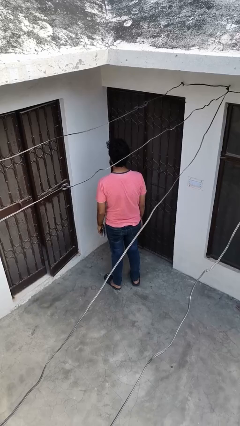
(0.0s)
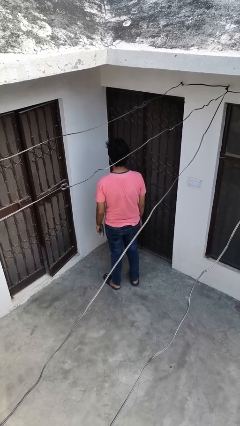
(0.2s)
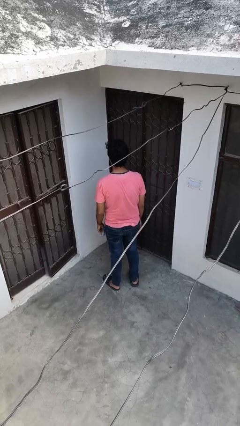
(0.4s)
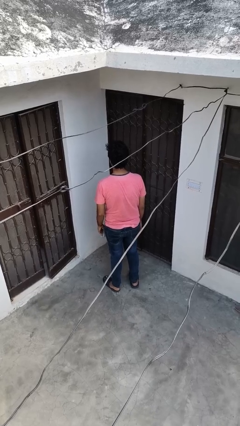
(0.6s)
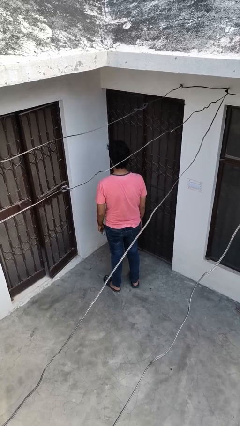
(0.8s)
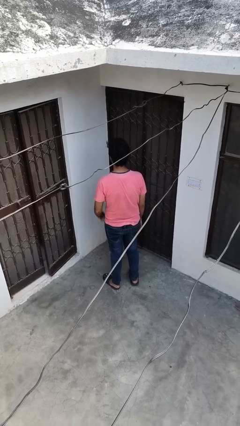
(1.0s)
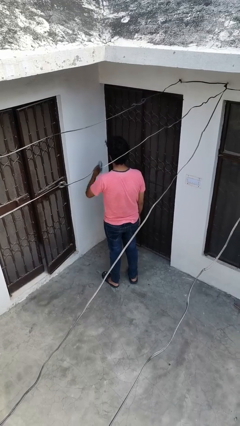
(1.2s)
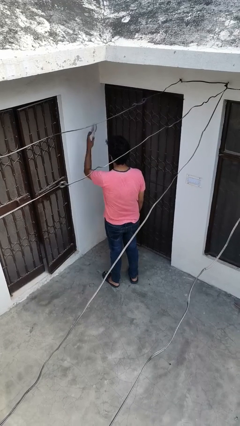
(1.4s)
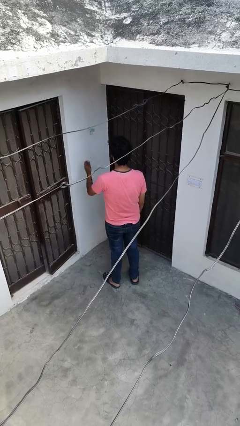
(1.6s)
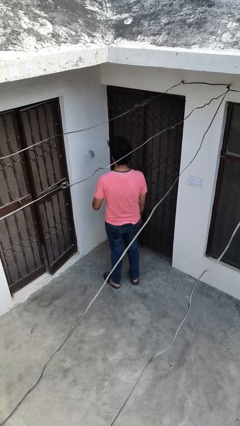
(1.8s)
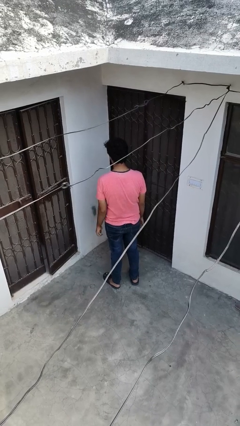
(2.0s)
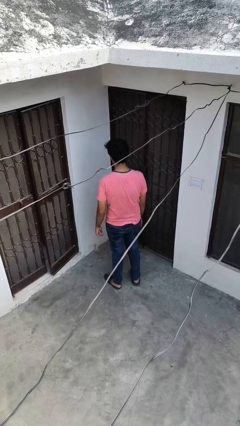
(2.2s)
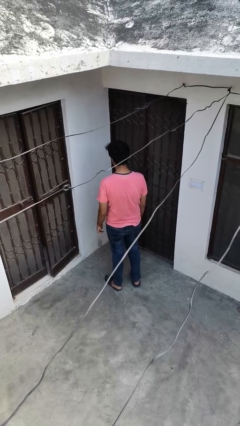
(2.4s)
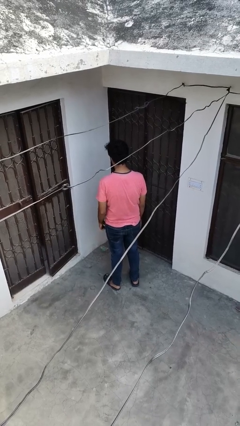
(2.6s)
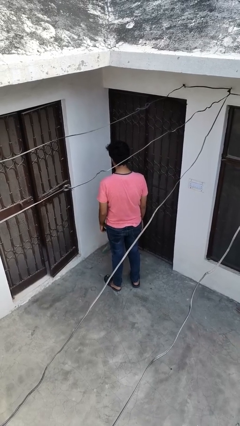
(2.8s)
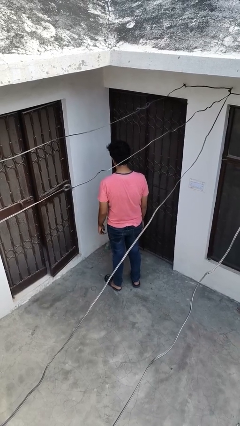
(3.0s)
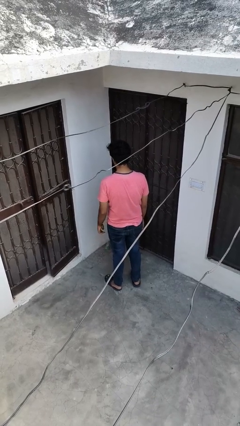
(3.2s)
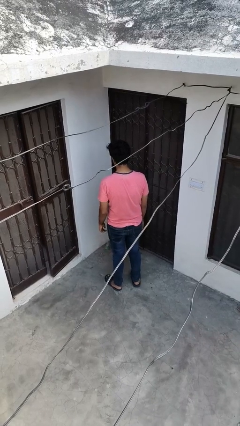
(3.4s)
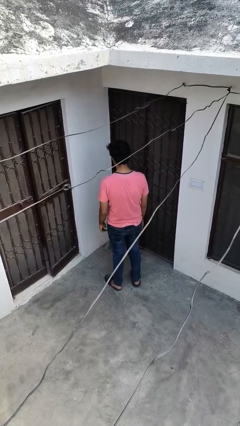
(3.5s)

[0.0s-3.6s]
person throws object into air

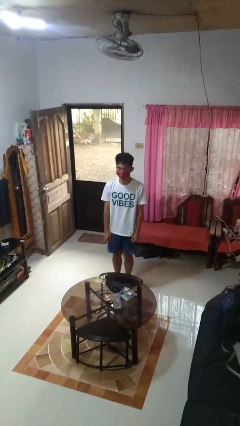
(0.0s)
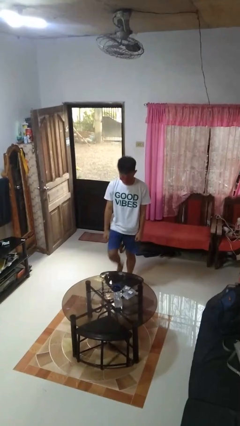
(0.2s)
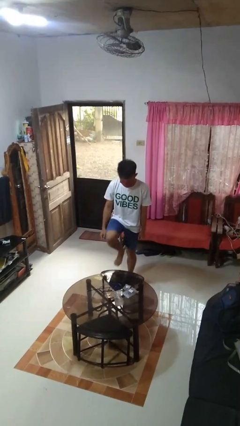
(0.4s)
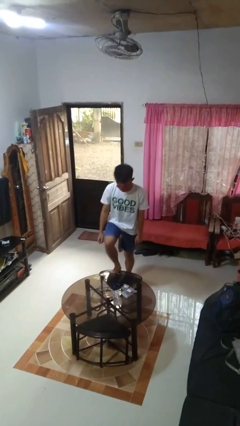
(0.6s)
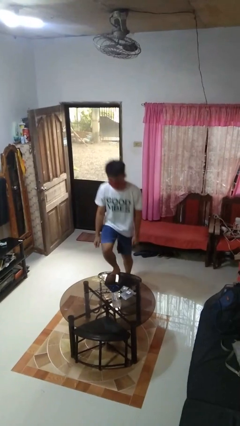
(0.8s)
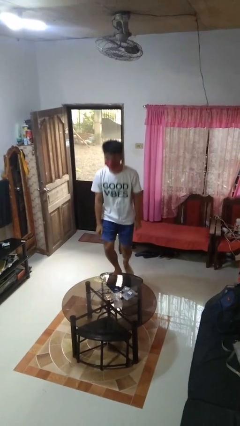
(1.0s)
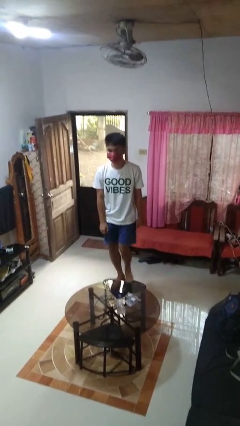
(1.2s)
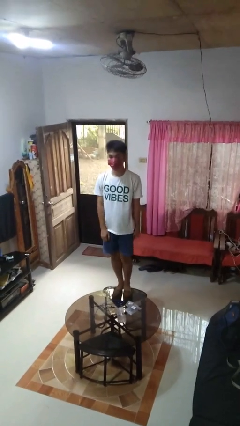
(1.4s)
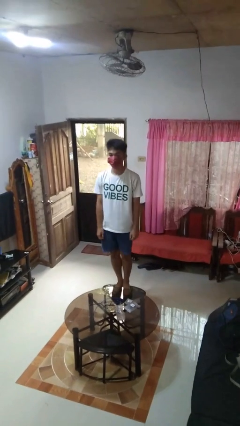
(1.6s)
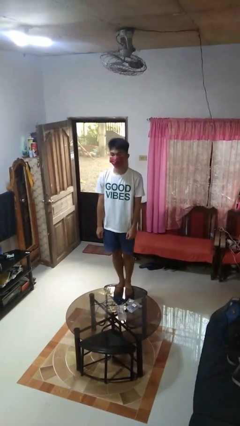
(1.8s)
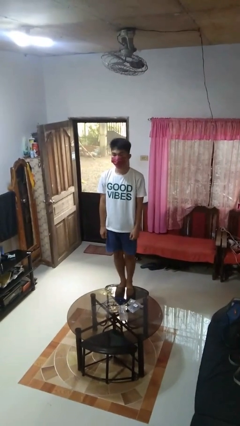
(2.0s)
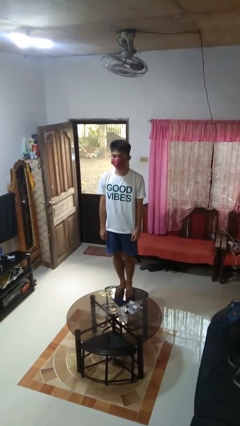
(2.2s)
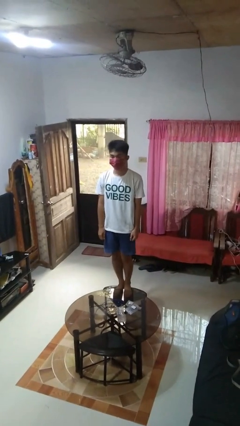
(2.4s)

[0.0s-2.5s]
person climbs on chair

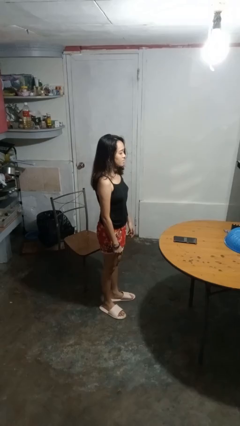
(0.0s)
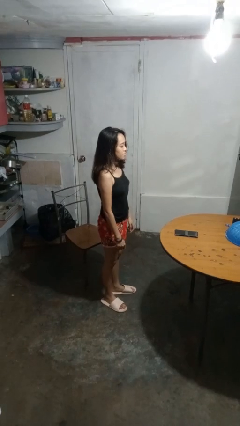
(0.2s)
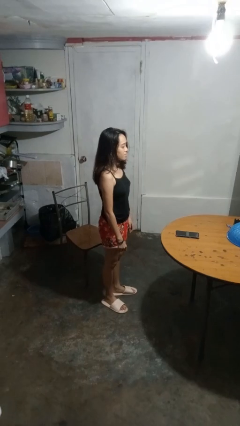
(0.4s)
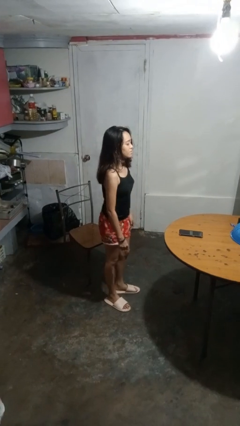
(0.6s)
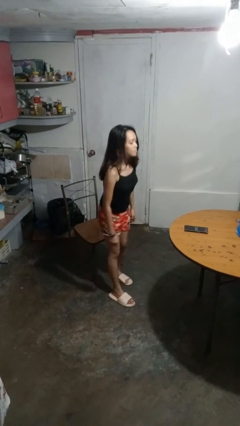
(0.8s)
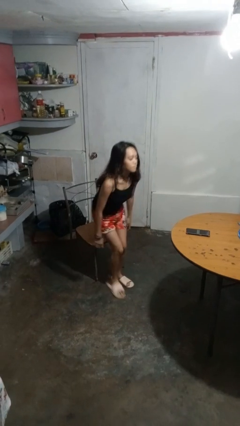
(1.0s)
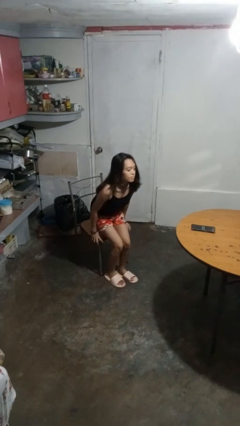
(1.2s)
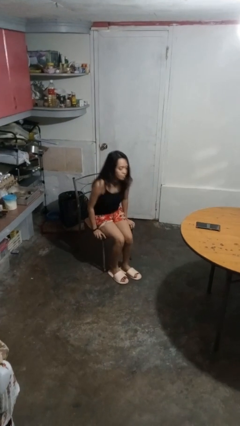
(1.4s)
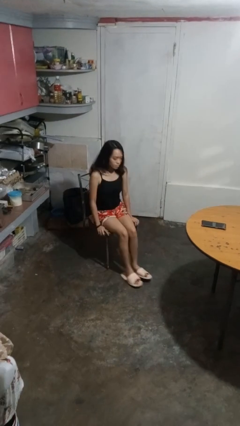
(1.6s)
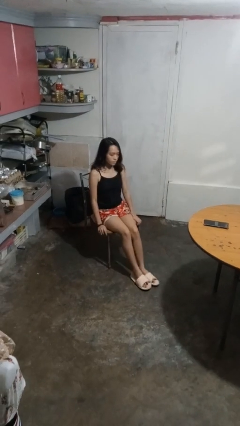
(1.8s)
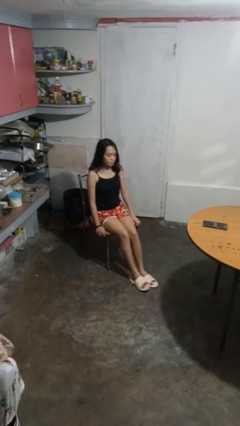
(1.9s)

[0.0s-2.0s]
person sits down

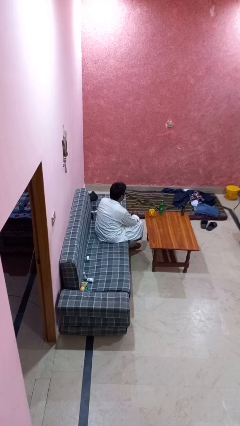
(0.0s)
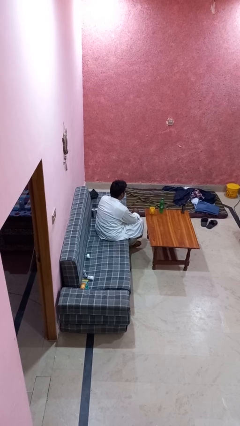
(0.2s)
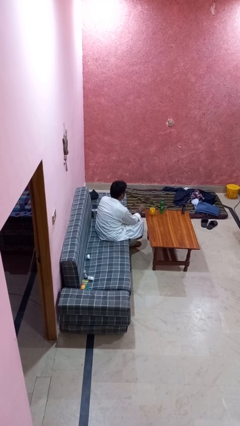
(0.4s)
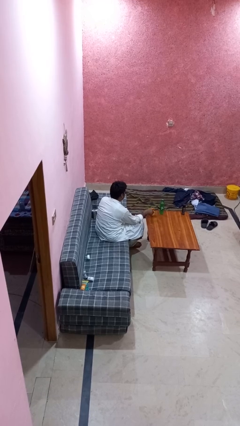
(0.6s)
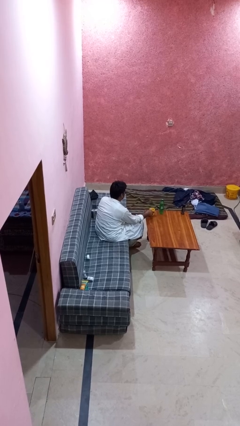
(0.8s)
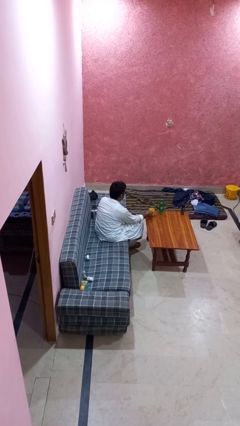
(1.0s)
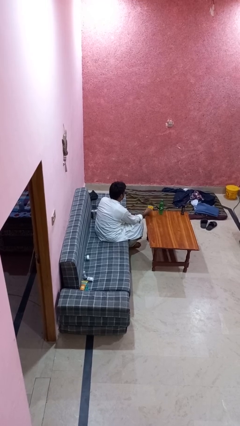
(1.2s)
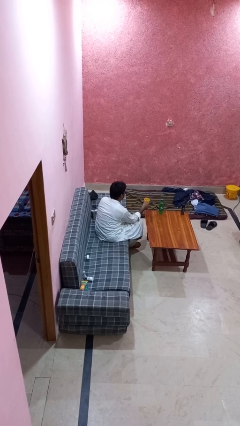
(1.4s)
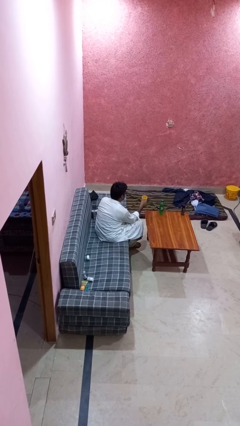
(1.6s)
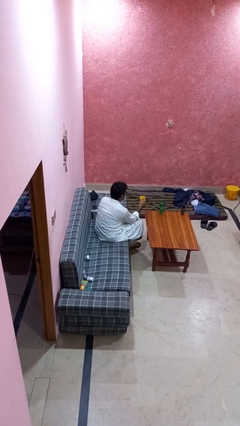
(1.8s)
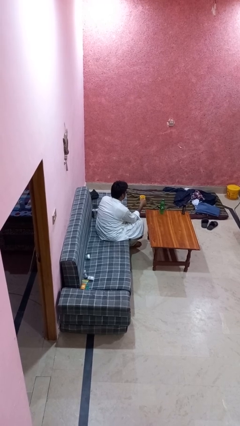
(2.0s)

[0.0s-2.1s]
person picks up object from table

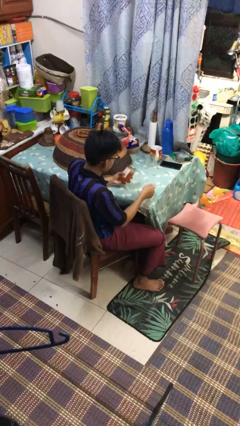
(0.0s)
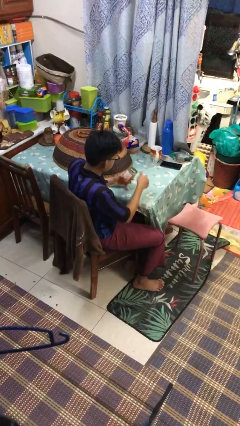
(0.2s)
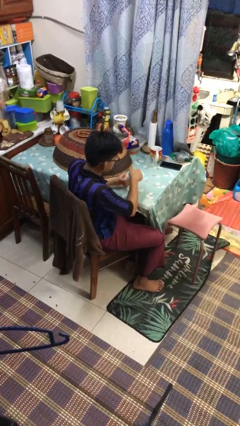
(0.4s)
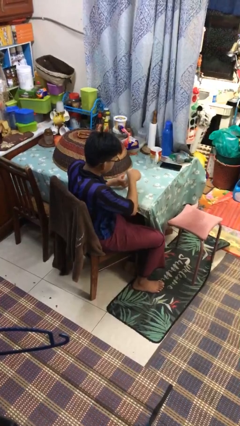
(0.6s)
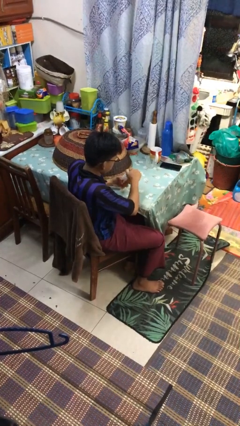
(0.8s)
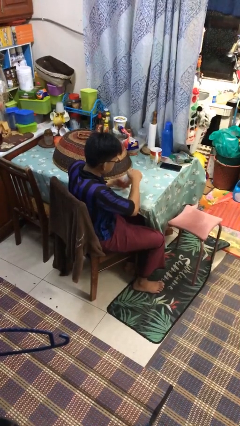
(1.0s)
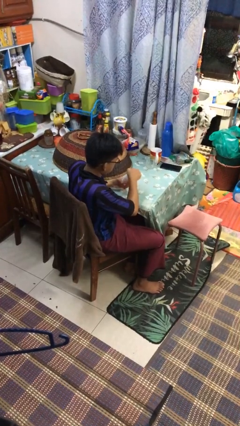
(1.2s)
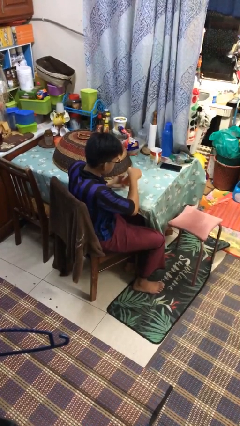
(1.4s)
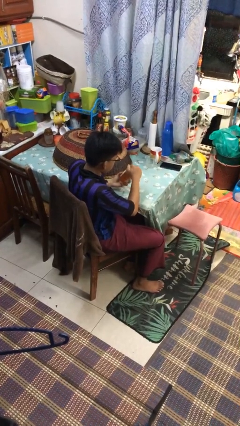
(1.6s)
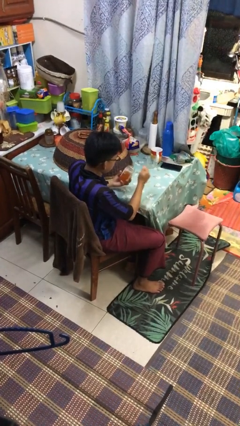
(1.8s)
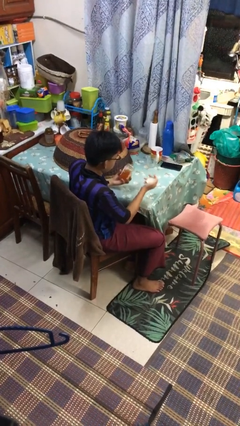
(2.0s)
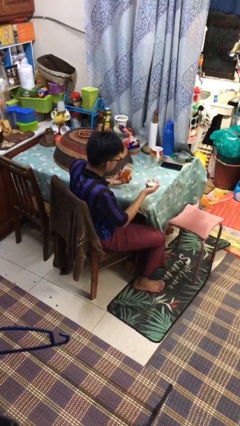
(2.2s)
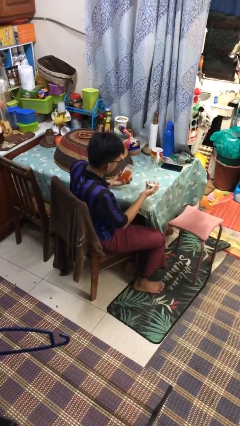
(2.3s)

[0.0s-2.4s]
person opens jar

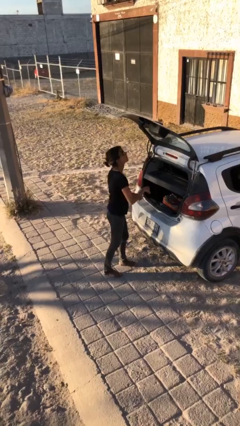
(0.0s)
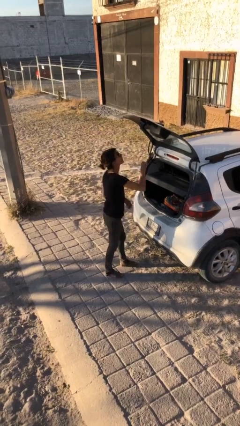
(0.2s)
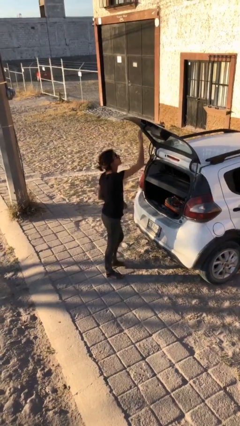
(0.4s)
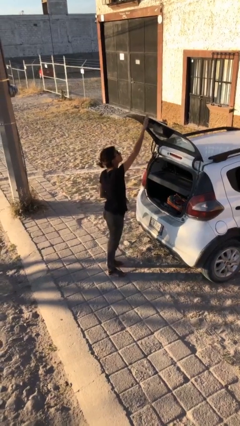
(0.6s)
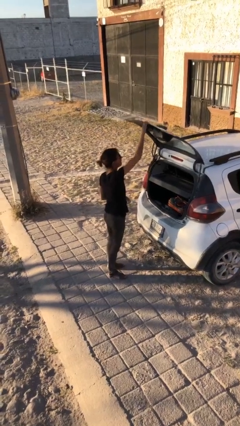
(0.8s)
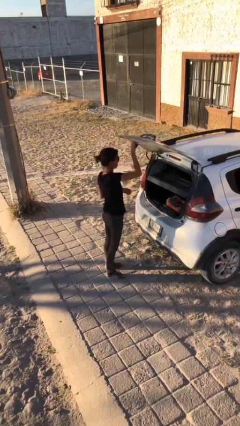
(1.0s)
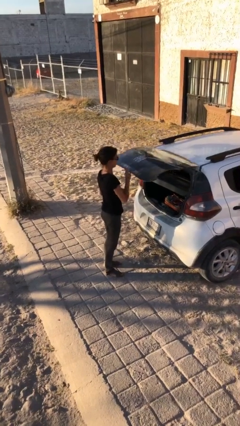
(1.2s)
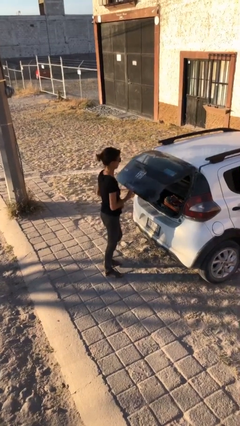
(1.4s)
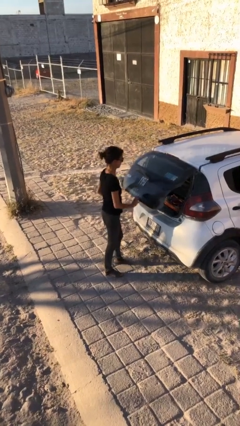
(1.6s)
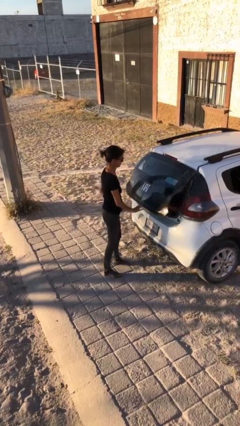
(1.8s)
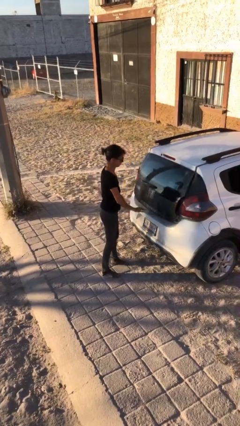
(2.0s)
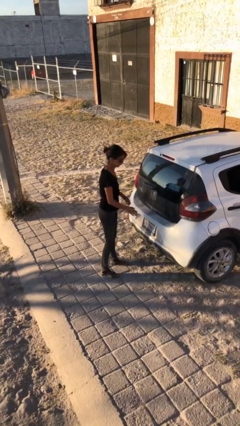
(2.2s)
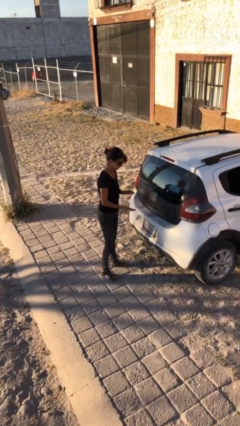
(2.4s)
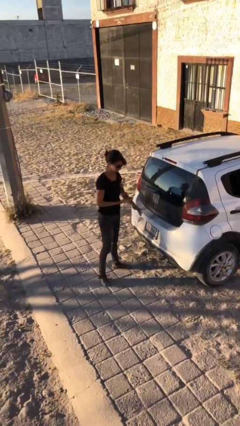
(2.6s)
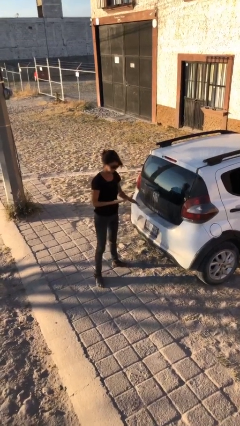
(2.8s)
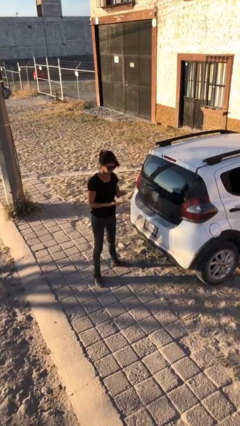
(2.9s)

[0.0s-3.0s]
person closes car trunk

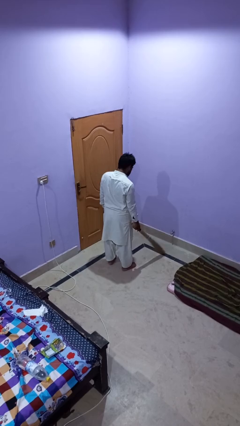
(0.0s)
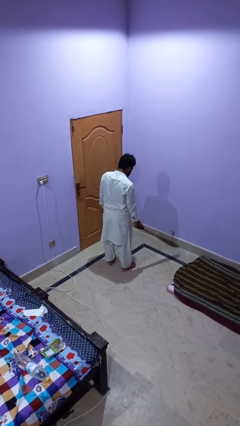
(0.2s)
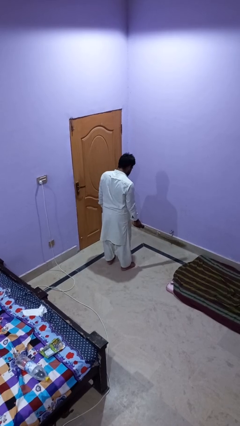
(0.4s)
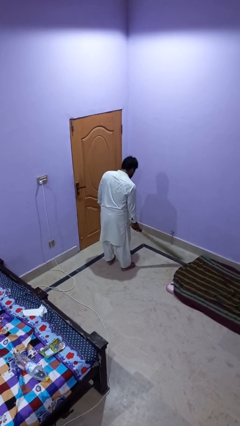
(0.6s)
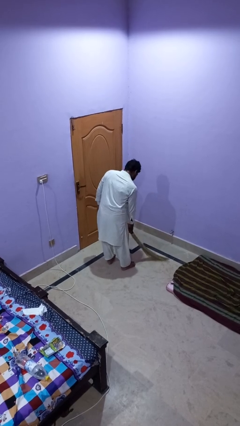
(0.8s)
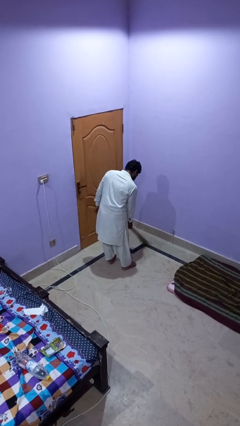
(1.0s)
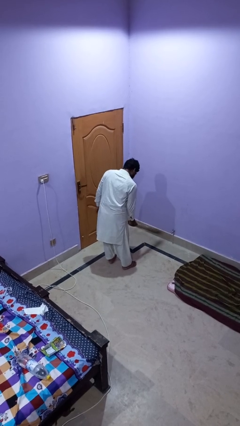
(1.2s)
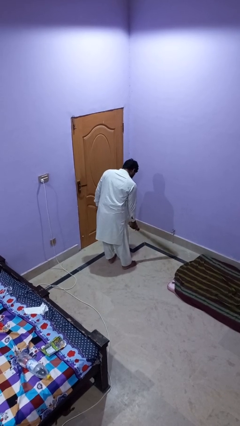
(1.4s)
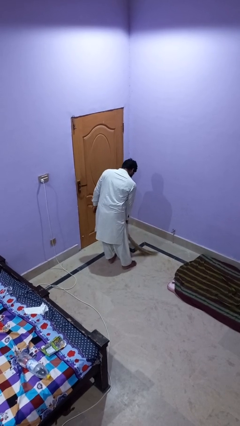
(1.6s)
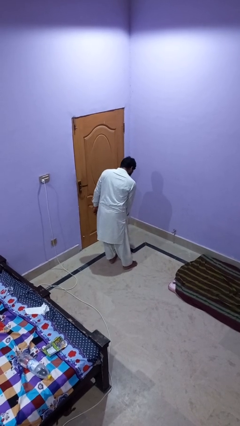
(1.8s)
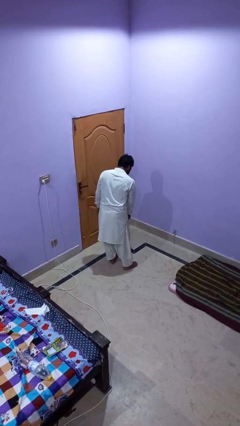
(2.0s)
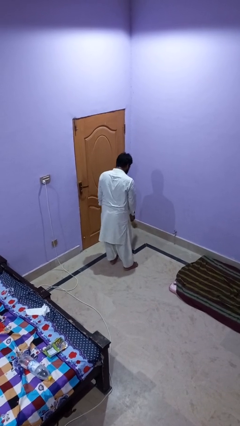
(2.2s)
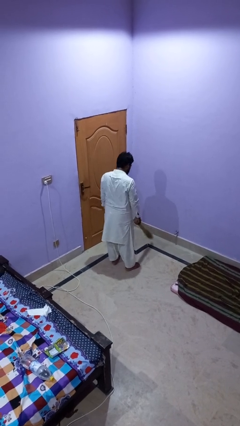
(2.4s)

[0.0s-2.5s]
person sweeps floor
